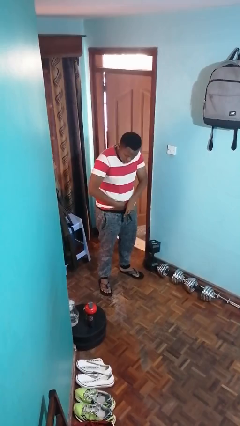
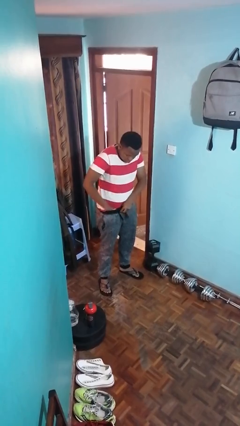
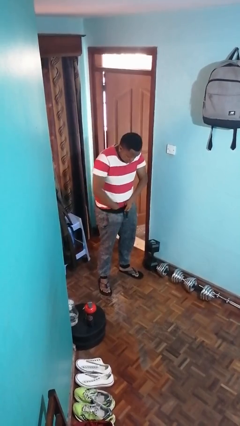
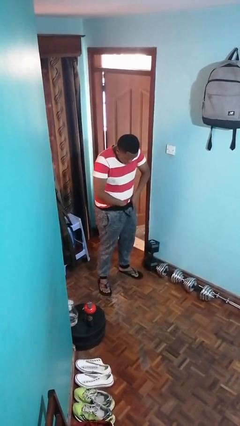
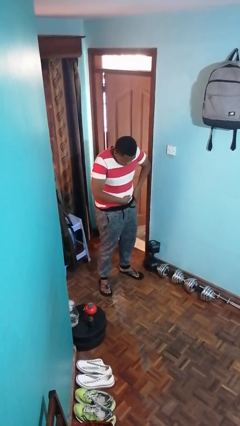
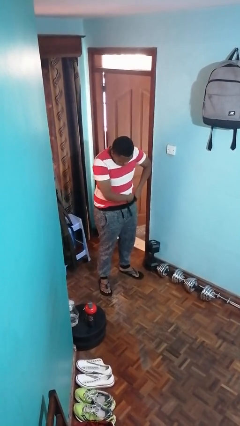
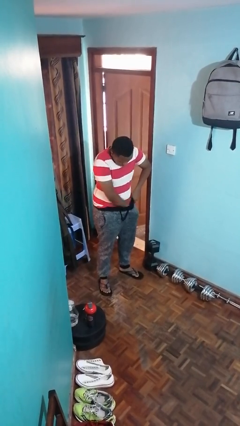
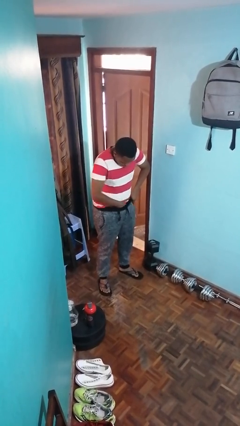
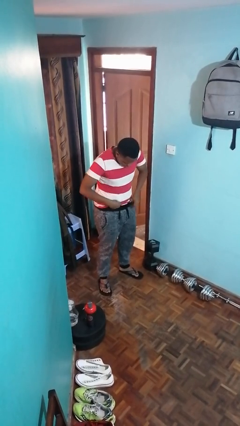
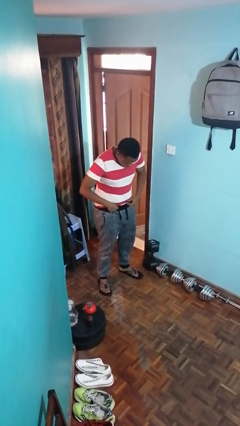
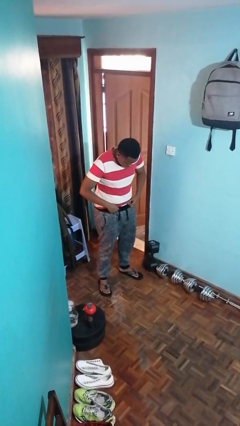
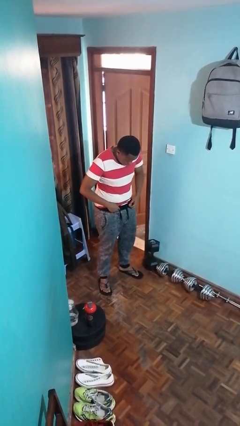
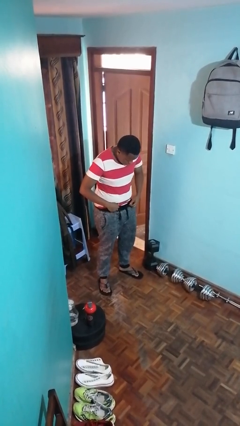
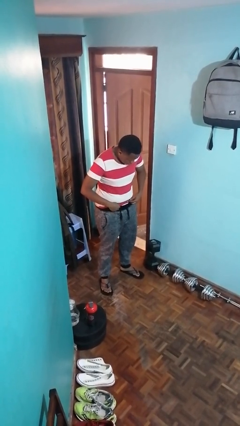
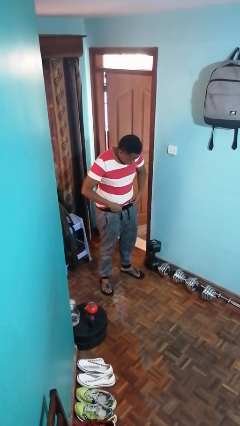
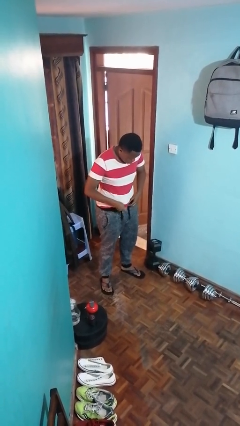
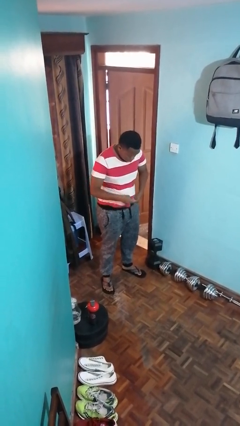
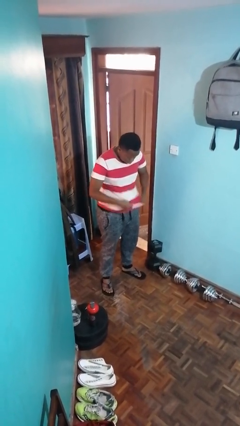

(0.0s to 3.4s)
person tucks in shirt

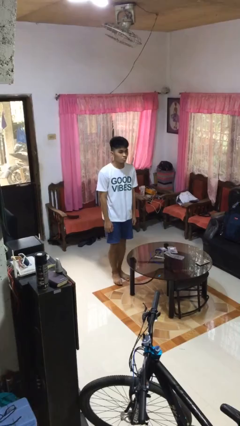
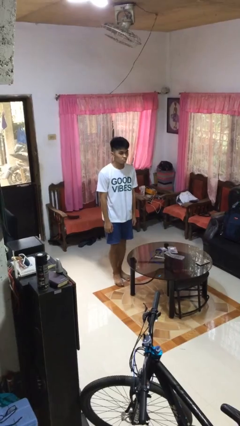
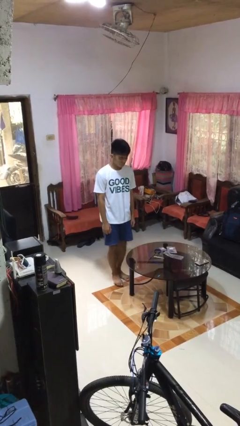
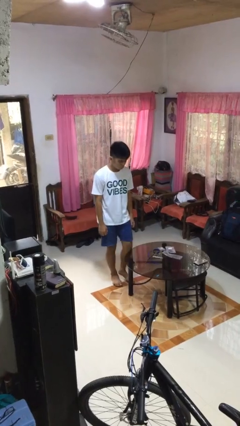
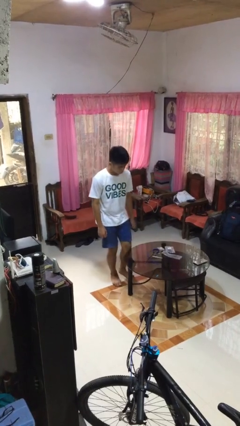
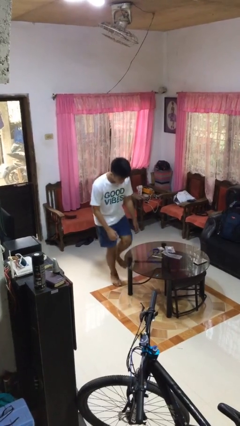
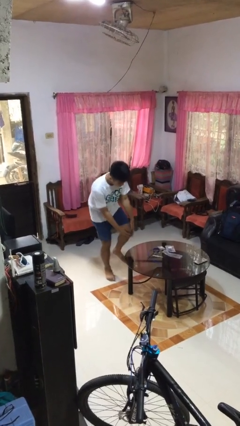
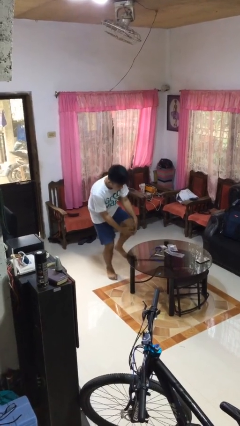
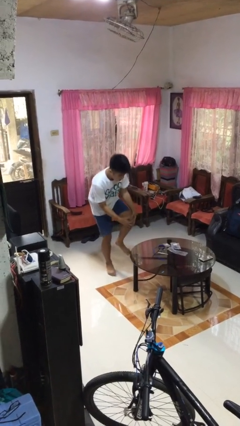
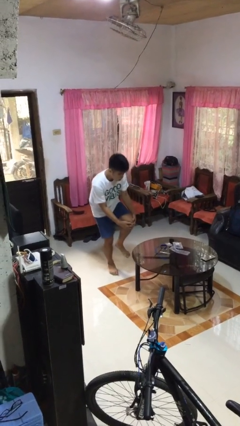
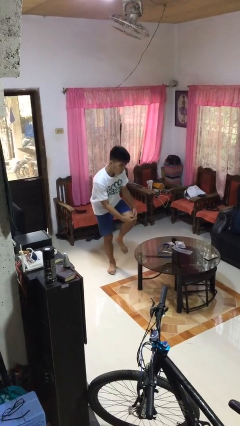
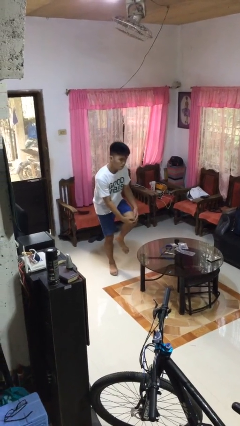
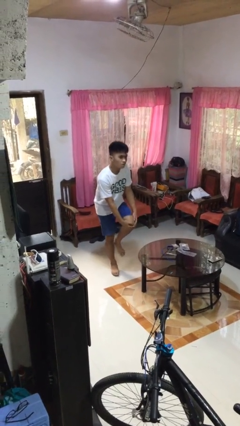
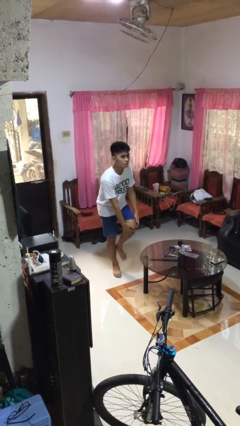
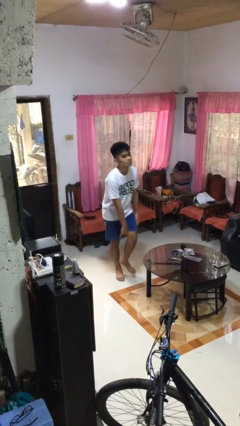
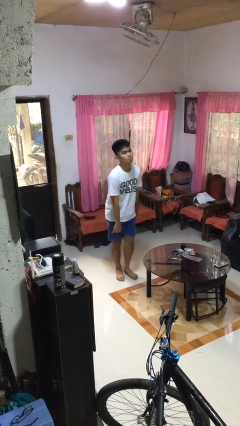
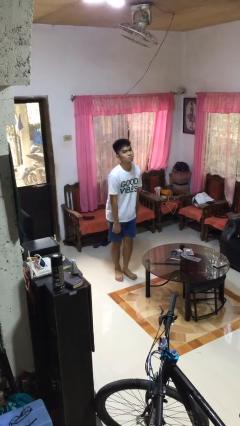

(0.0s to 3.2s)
person bumps into table

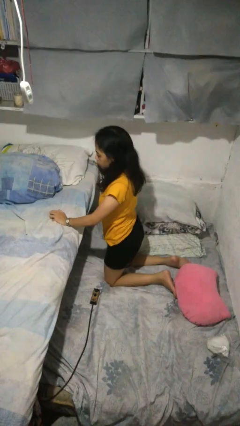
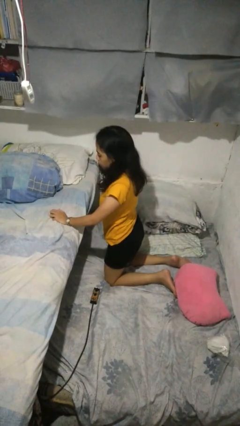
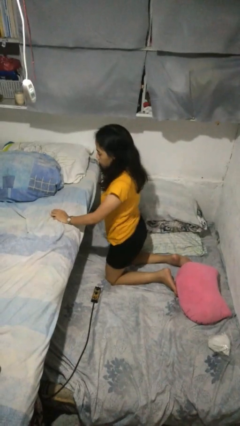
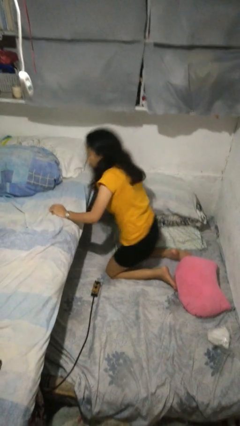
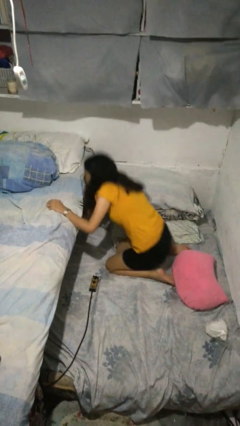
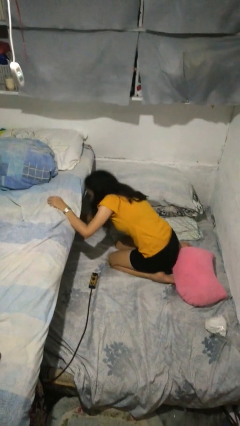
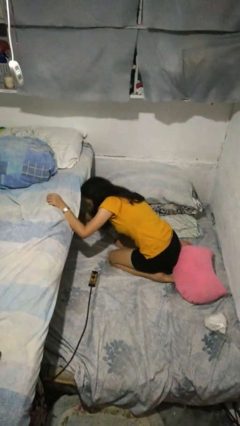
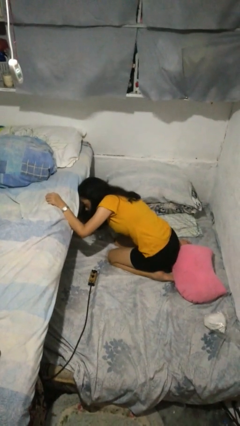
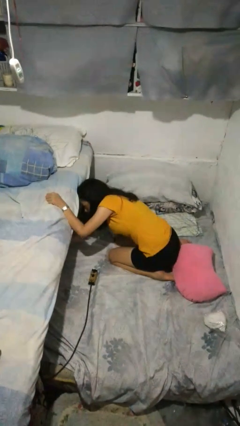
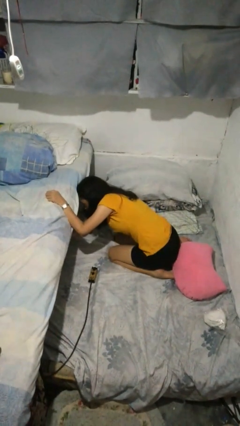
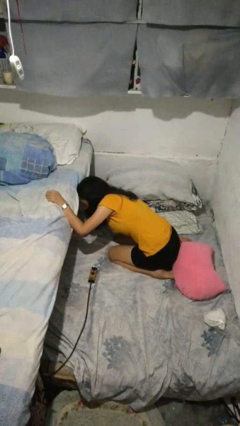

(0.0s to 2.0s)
person searches under bed

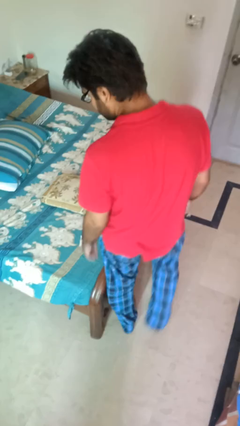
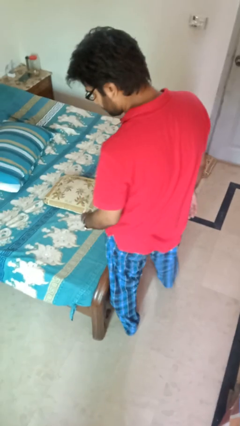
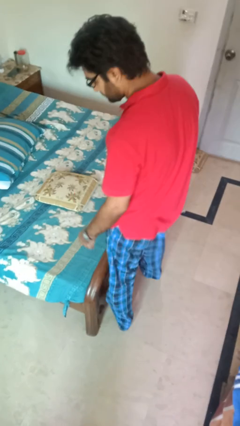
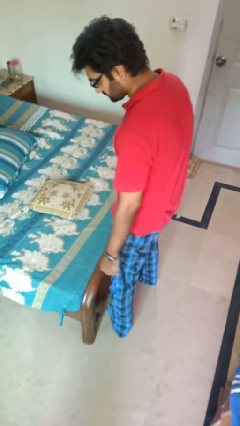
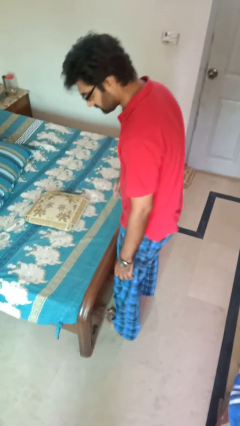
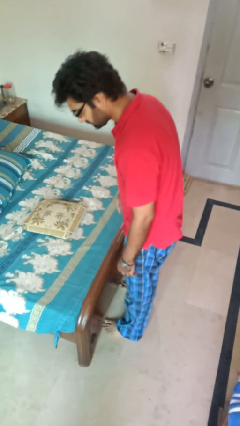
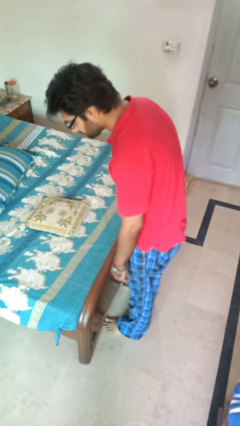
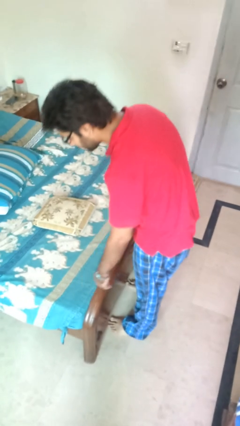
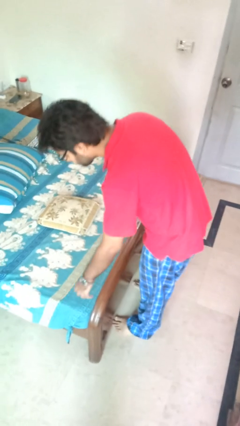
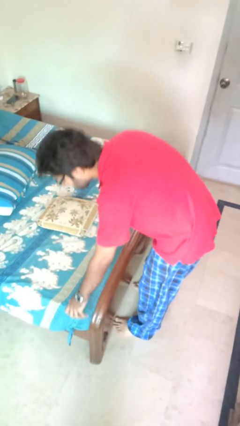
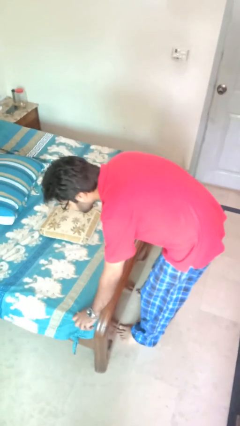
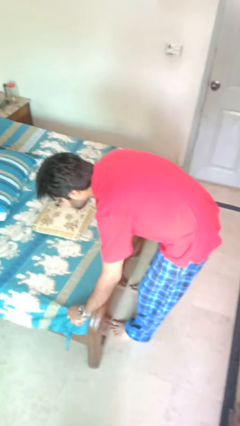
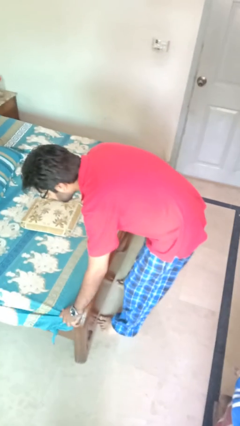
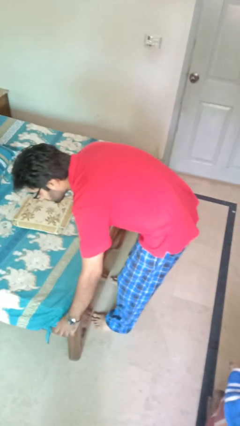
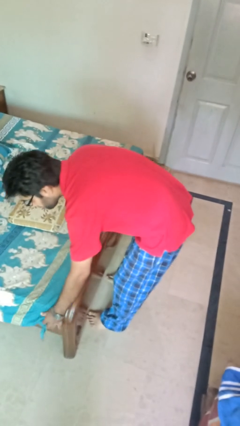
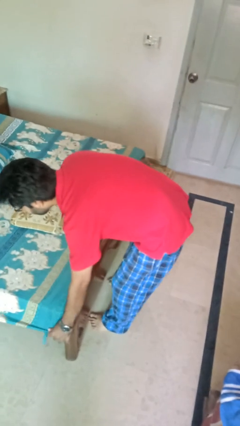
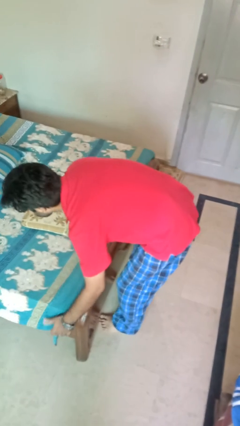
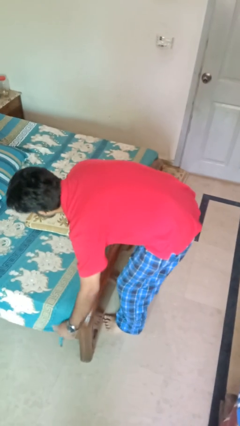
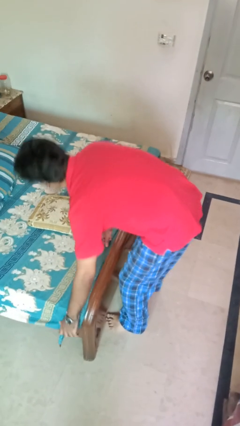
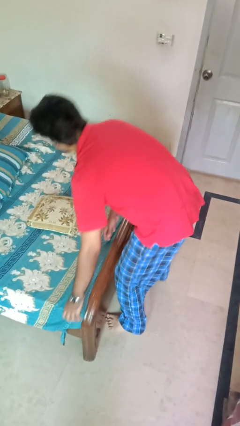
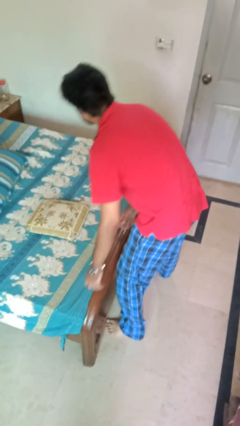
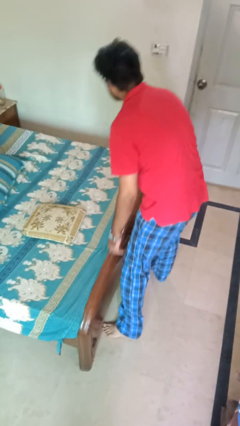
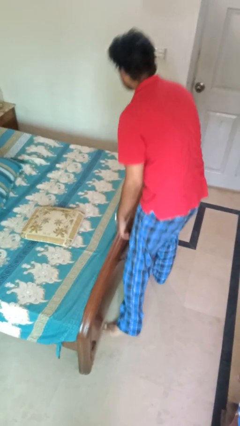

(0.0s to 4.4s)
person makes bed

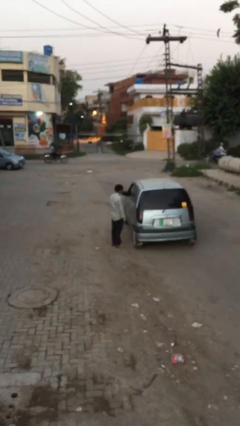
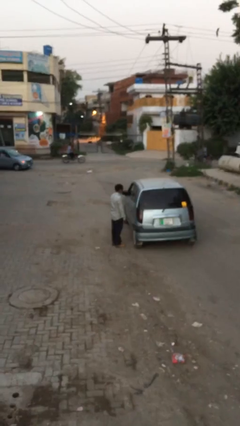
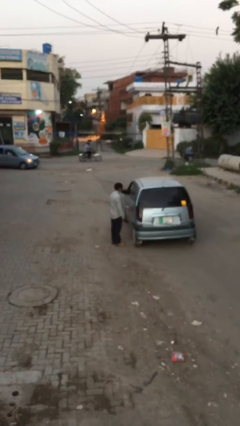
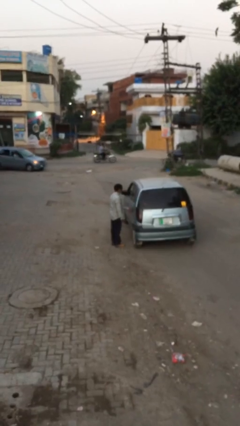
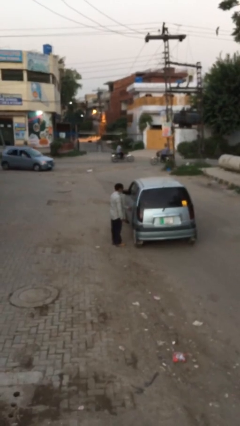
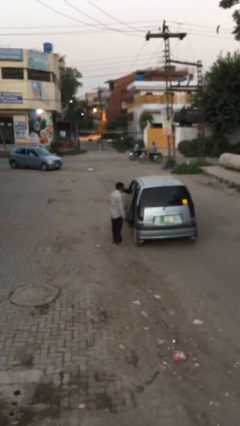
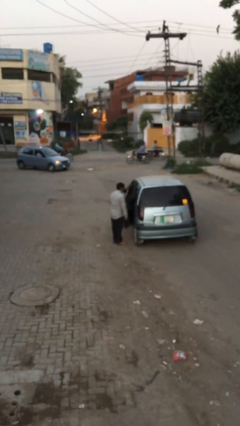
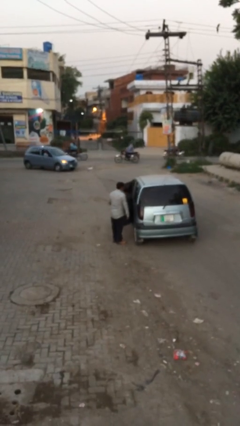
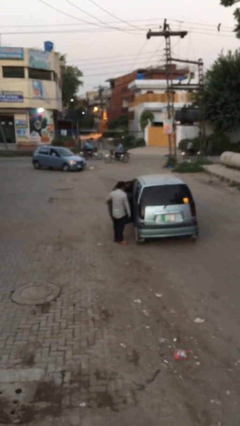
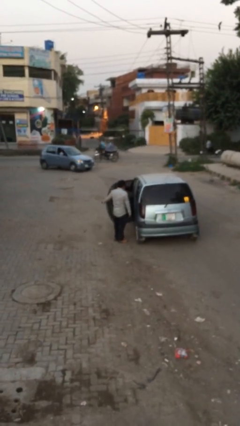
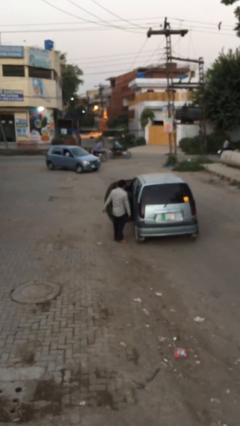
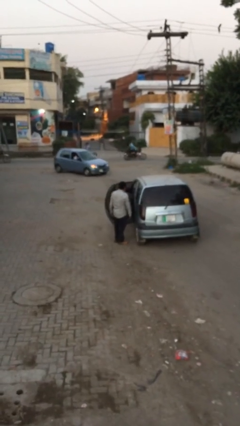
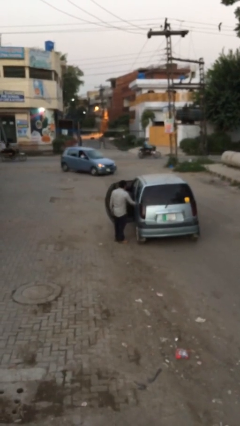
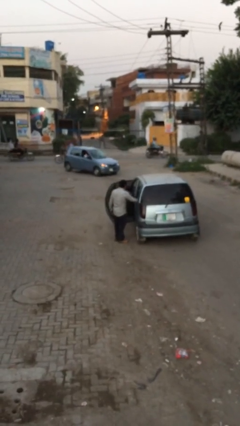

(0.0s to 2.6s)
person opens car door

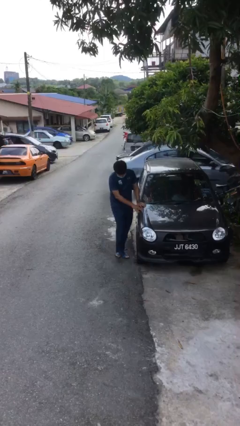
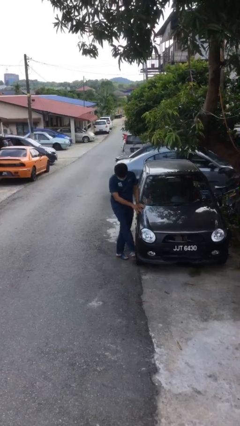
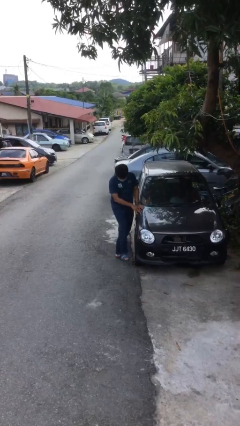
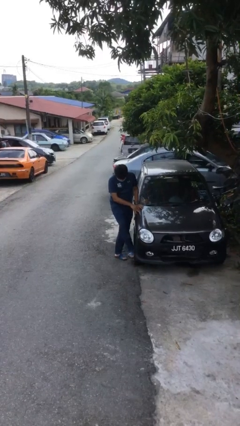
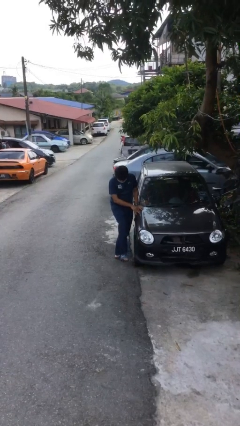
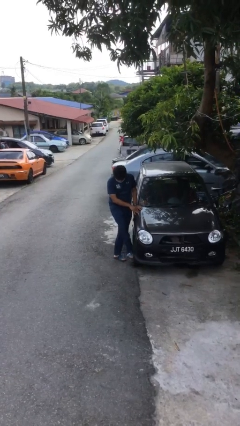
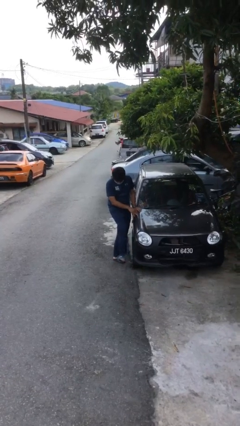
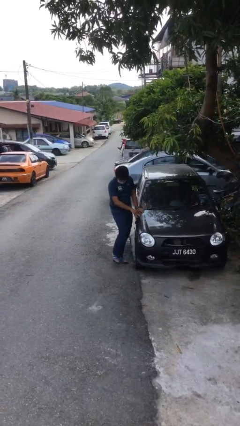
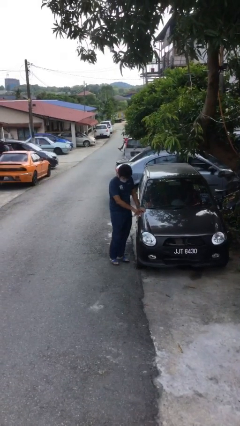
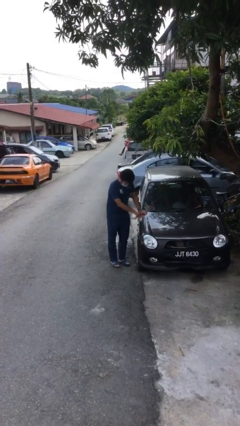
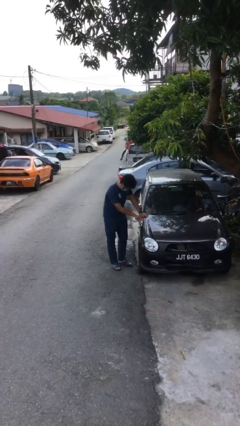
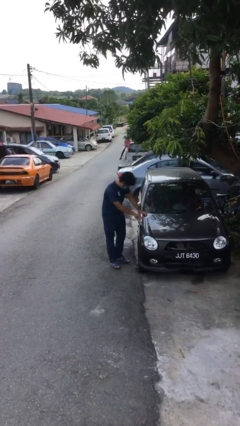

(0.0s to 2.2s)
person kicks car tires

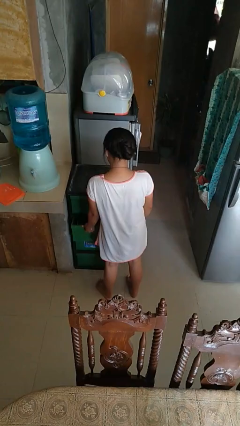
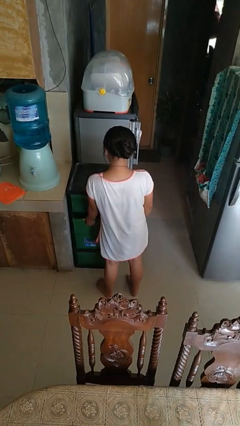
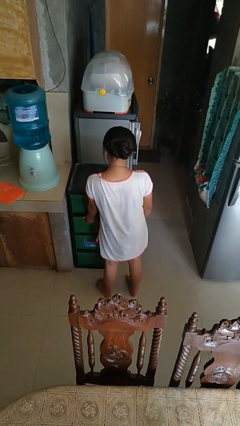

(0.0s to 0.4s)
person closes kitchen drawer
